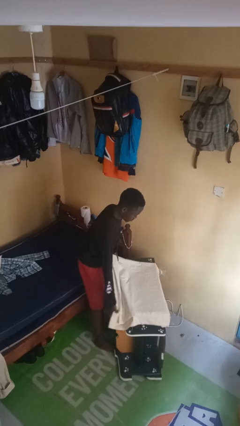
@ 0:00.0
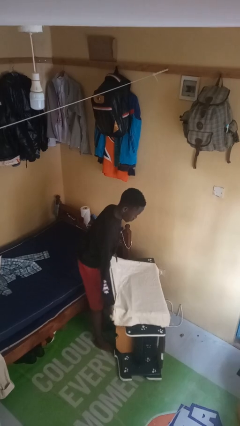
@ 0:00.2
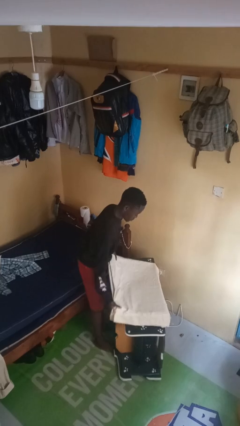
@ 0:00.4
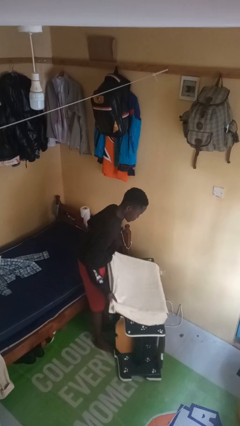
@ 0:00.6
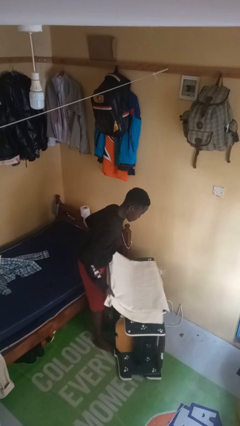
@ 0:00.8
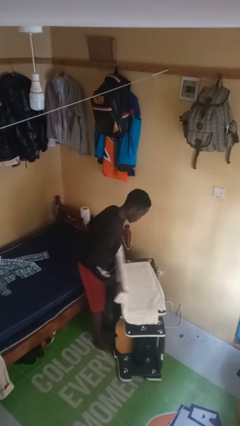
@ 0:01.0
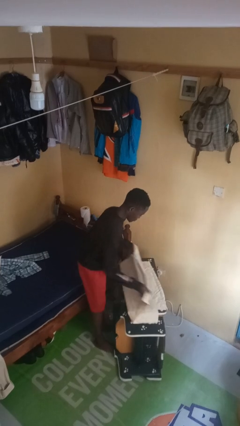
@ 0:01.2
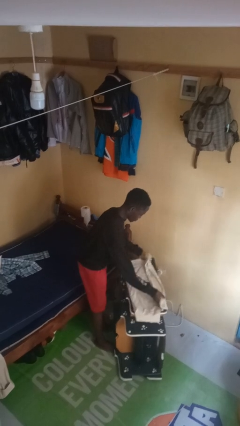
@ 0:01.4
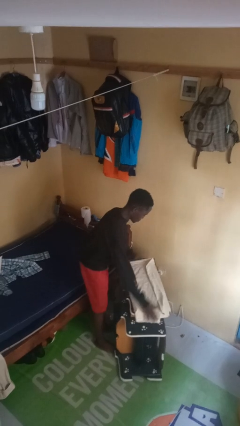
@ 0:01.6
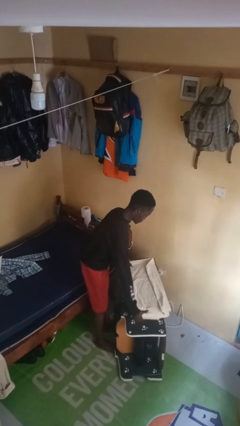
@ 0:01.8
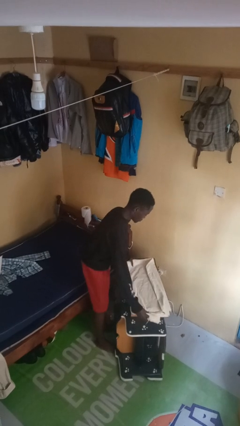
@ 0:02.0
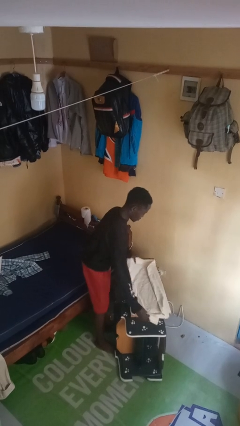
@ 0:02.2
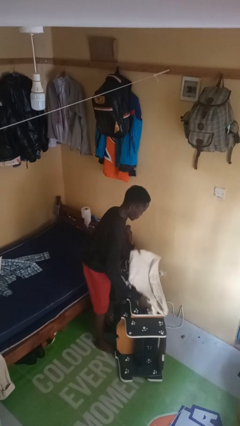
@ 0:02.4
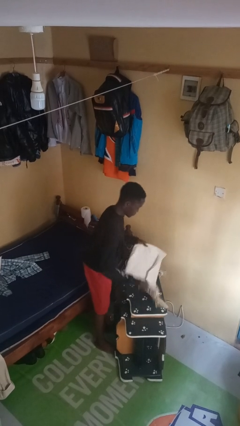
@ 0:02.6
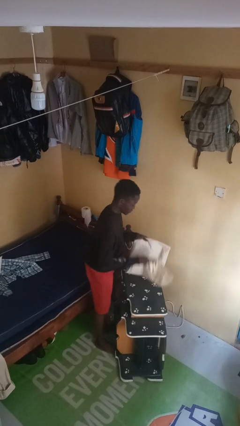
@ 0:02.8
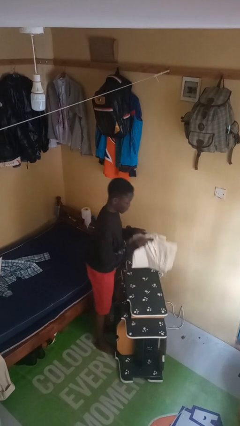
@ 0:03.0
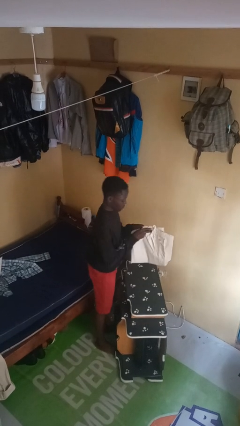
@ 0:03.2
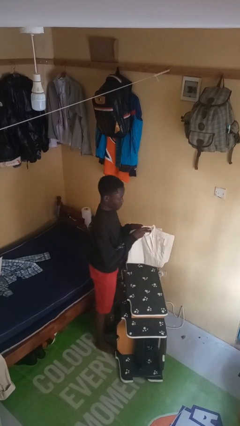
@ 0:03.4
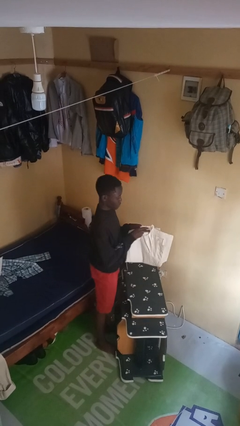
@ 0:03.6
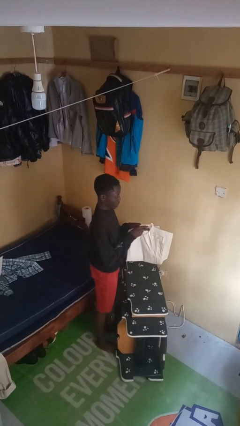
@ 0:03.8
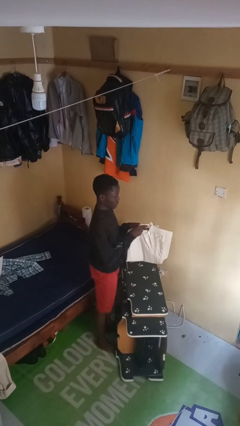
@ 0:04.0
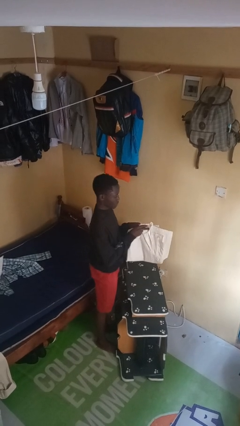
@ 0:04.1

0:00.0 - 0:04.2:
person folds tablecloth

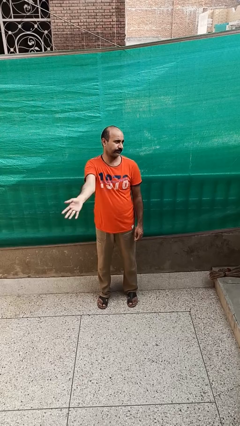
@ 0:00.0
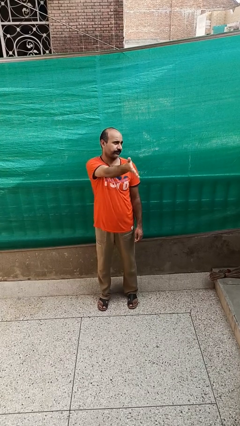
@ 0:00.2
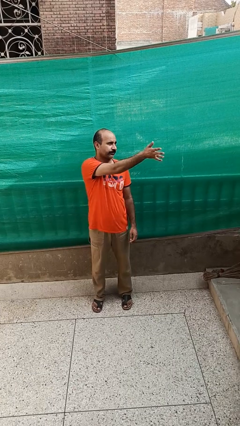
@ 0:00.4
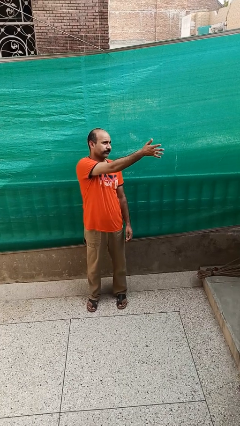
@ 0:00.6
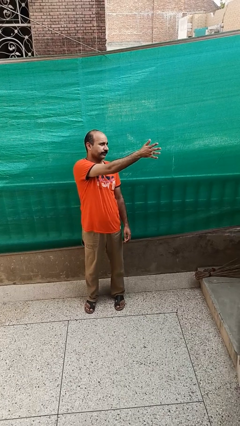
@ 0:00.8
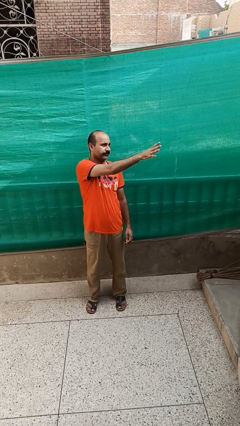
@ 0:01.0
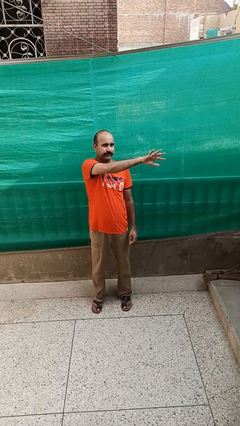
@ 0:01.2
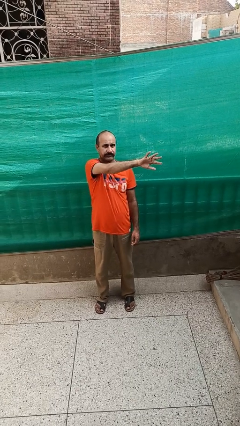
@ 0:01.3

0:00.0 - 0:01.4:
person gestures swipe left

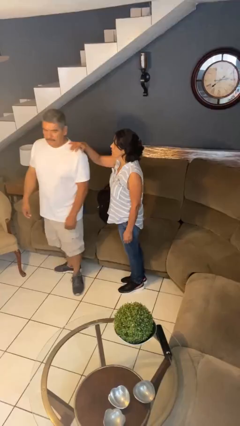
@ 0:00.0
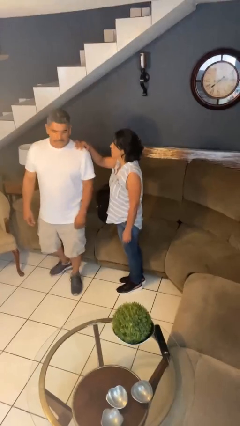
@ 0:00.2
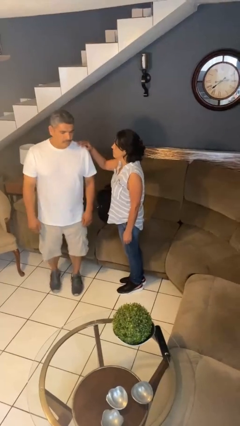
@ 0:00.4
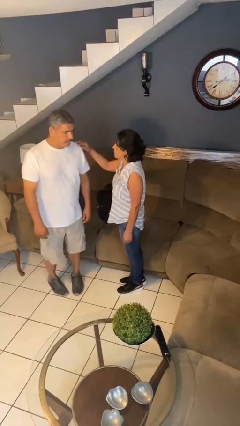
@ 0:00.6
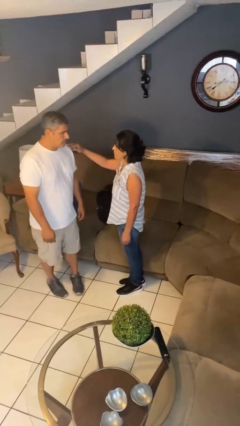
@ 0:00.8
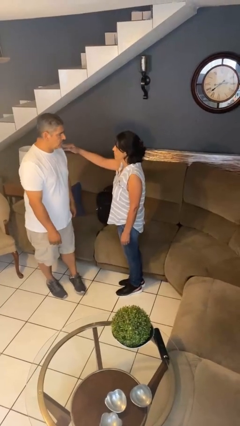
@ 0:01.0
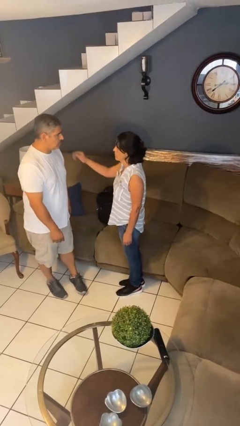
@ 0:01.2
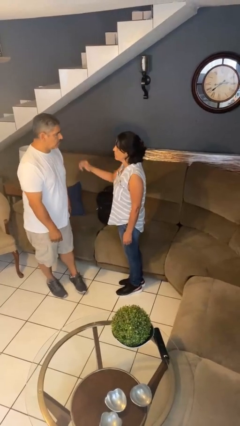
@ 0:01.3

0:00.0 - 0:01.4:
person spins person around

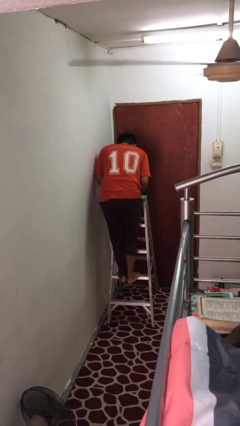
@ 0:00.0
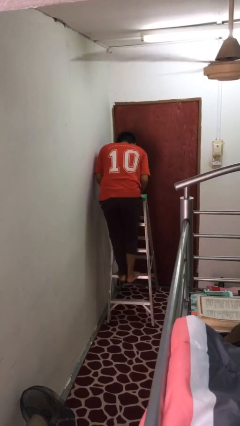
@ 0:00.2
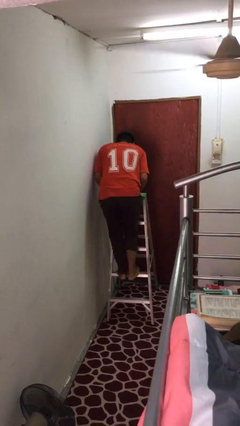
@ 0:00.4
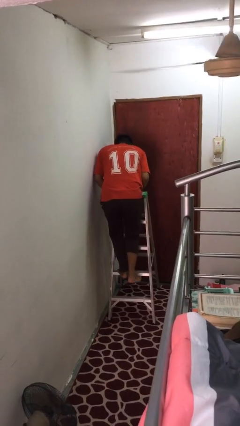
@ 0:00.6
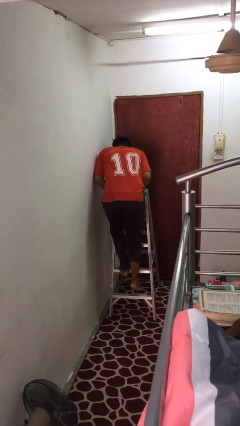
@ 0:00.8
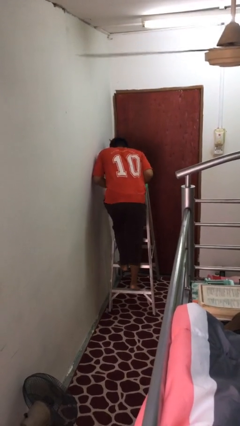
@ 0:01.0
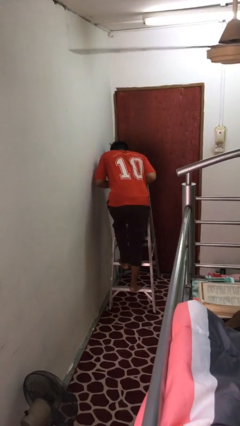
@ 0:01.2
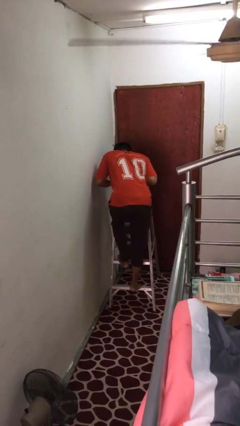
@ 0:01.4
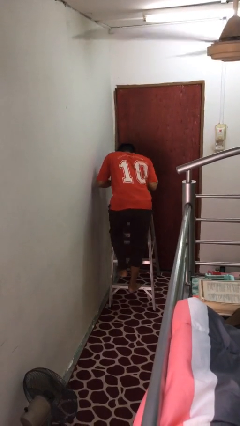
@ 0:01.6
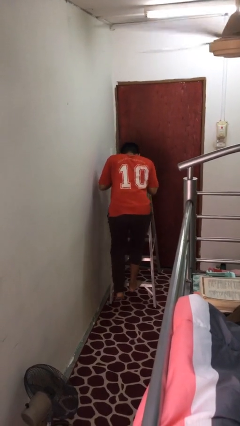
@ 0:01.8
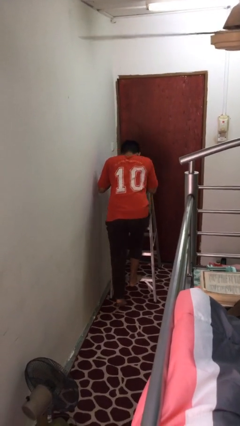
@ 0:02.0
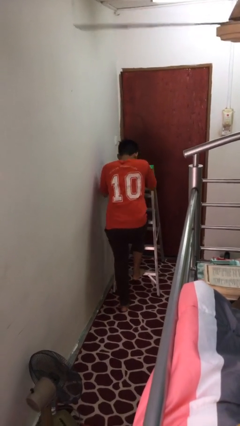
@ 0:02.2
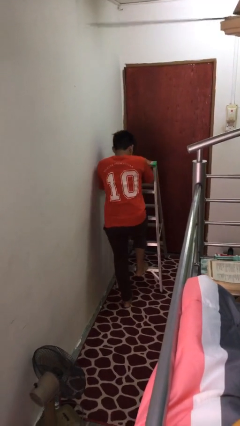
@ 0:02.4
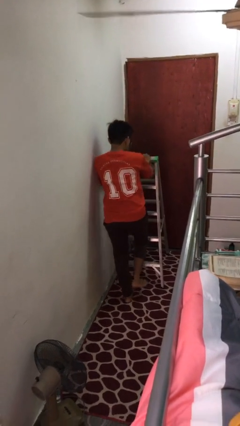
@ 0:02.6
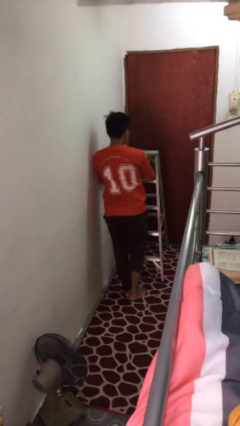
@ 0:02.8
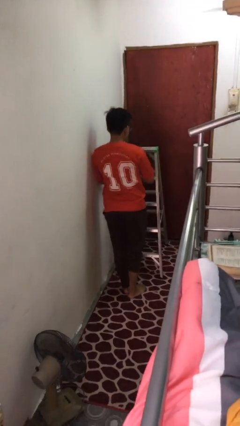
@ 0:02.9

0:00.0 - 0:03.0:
person climbs down ladder

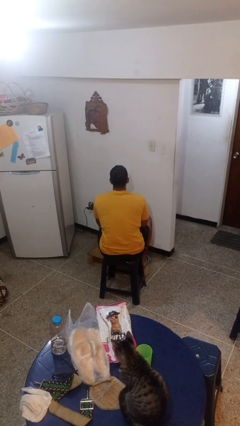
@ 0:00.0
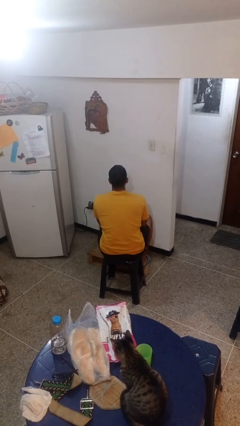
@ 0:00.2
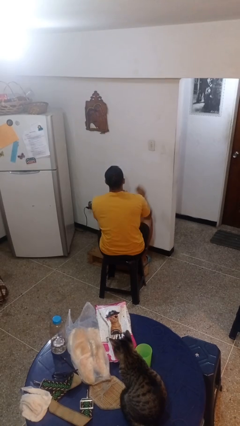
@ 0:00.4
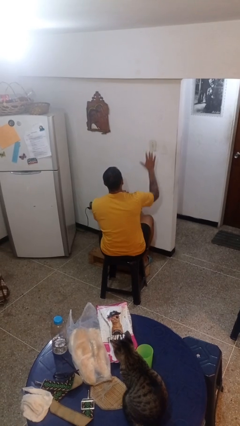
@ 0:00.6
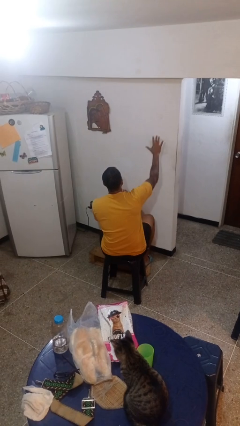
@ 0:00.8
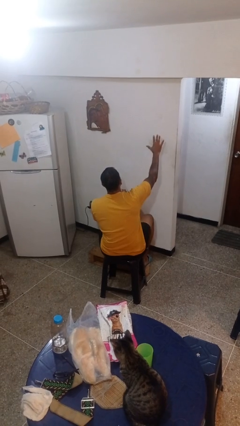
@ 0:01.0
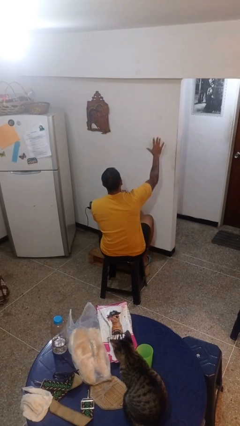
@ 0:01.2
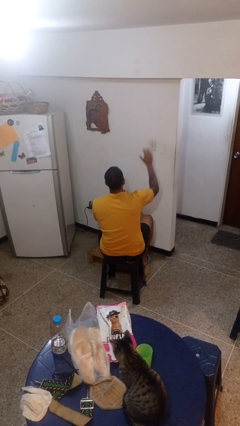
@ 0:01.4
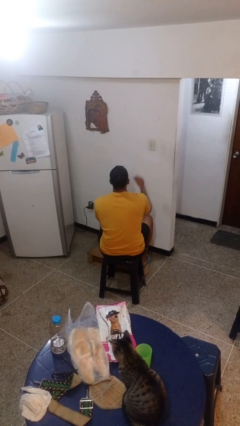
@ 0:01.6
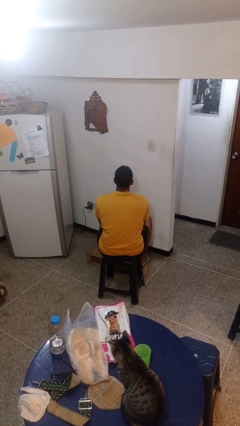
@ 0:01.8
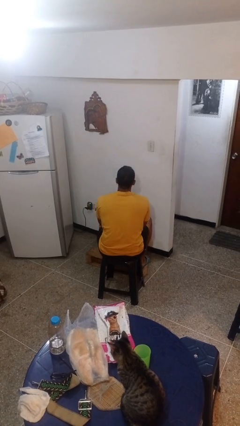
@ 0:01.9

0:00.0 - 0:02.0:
person gestures number five

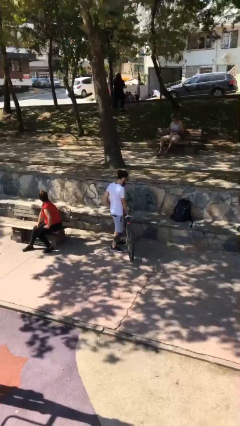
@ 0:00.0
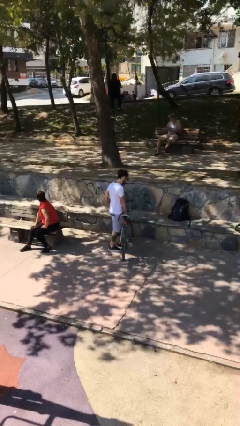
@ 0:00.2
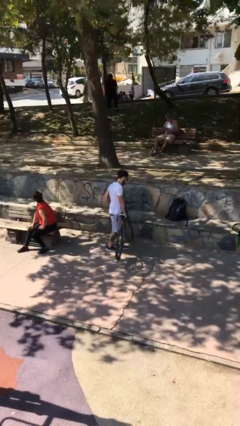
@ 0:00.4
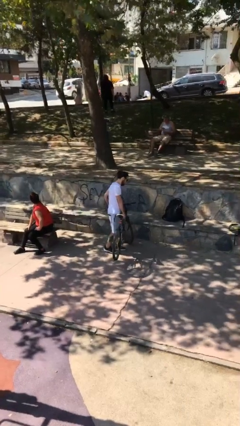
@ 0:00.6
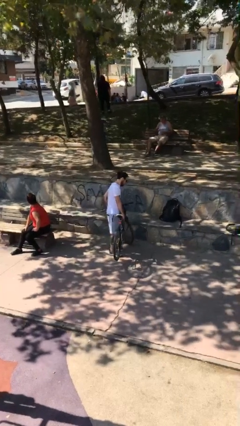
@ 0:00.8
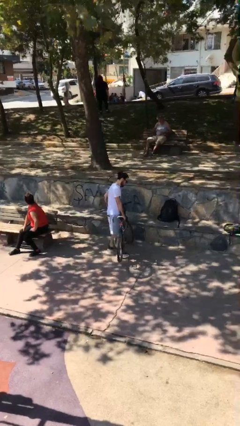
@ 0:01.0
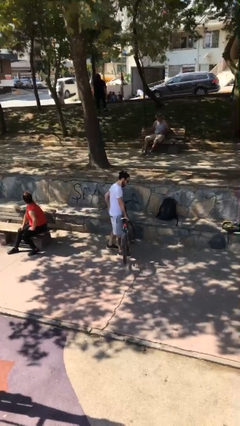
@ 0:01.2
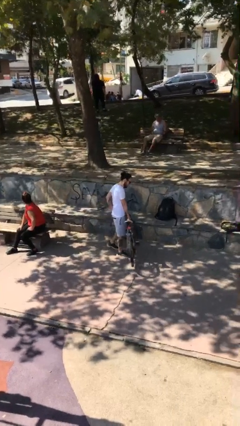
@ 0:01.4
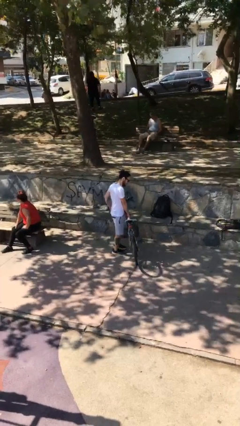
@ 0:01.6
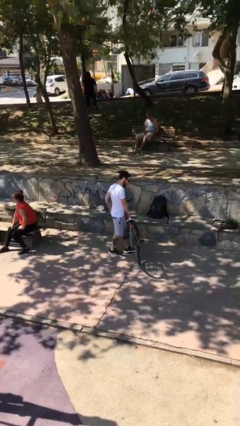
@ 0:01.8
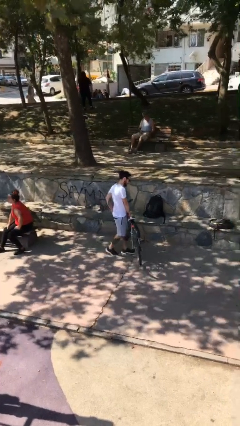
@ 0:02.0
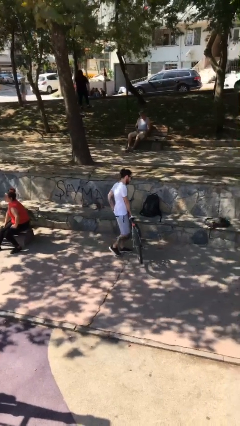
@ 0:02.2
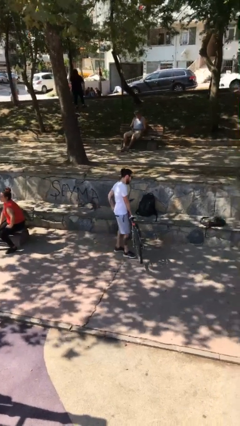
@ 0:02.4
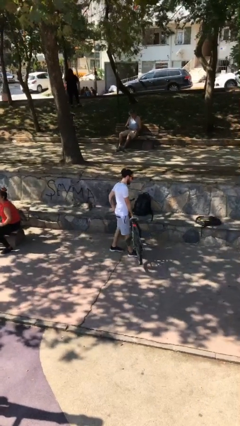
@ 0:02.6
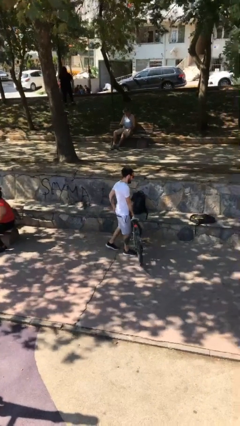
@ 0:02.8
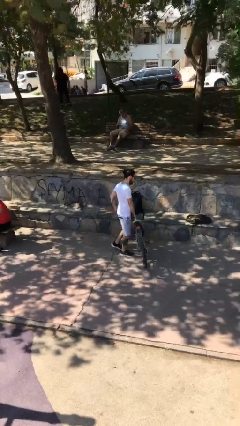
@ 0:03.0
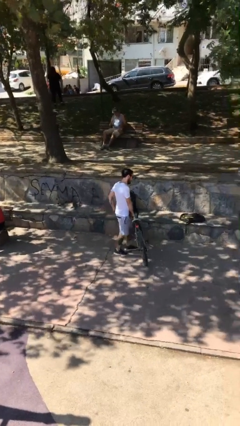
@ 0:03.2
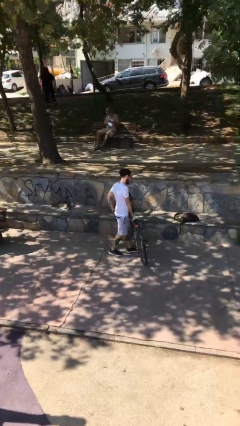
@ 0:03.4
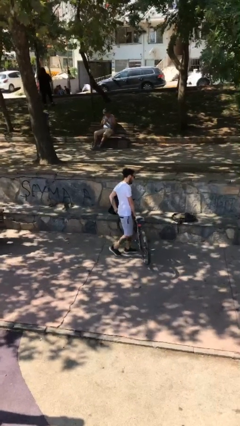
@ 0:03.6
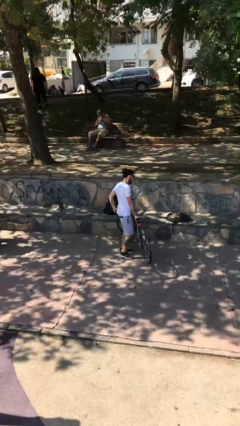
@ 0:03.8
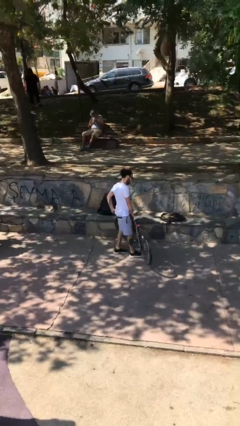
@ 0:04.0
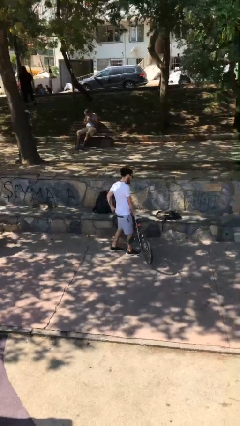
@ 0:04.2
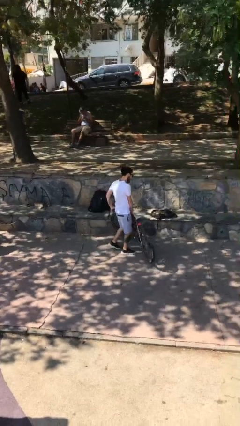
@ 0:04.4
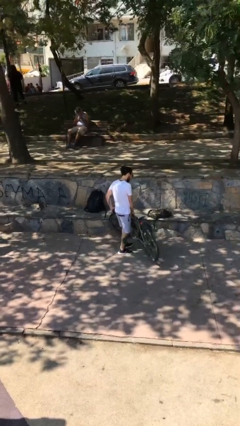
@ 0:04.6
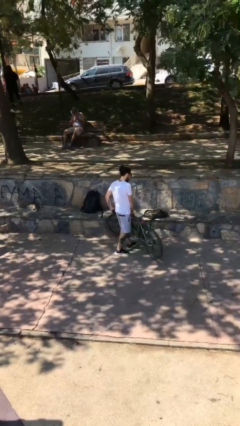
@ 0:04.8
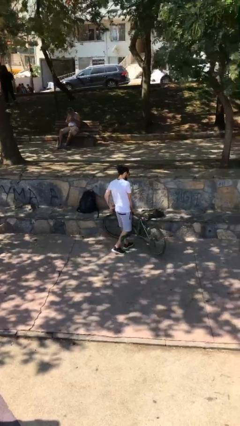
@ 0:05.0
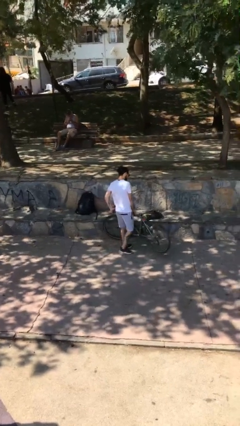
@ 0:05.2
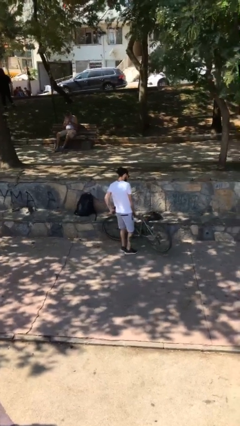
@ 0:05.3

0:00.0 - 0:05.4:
person carries heavy object
